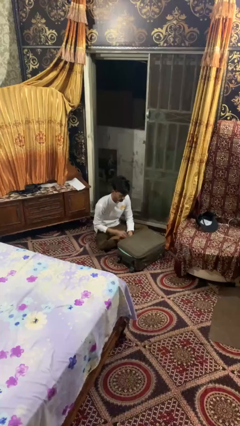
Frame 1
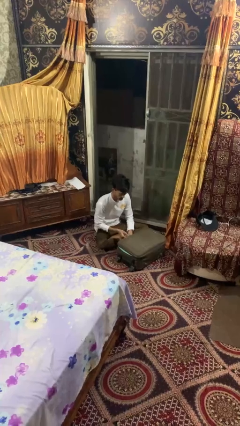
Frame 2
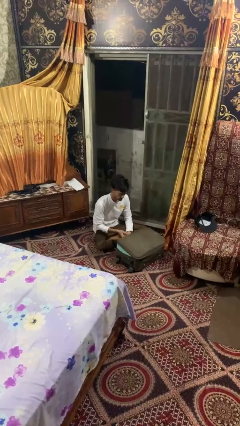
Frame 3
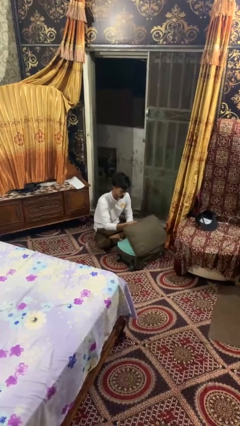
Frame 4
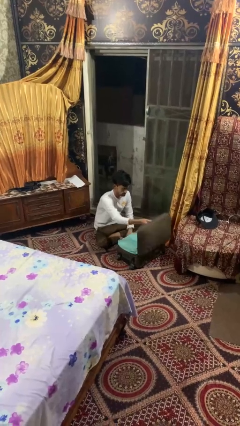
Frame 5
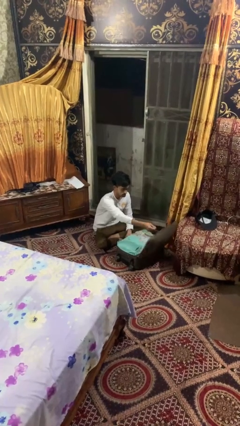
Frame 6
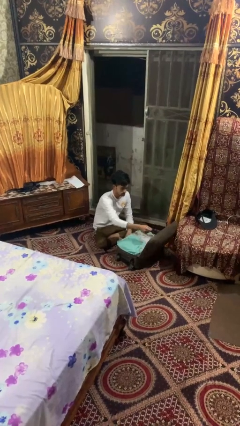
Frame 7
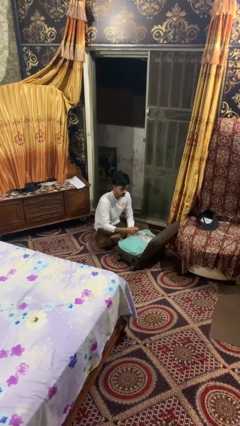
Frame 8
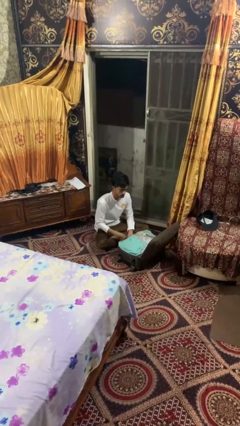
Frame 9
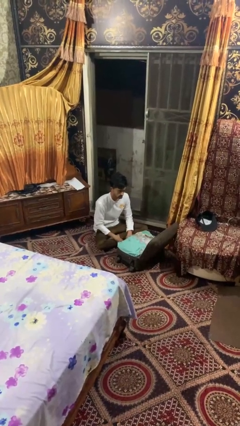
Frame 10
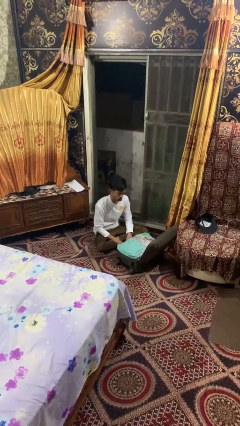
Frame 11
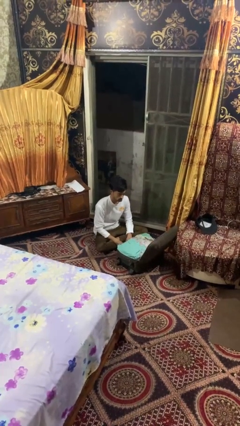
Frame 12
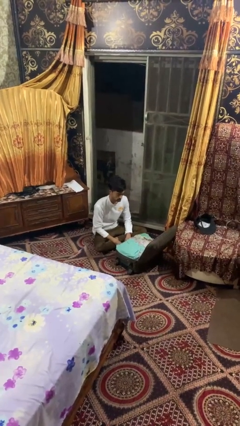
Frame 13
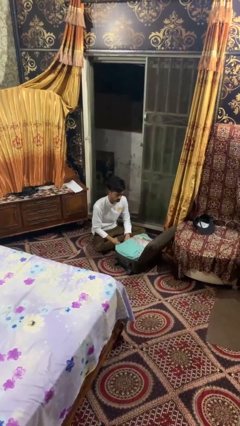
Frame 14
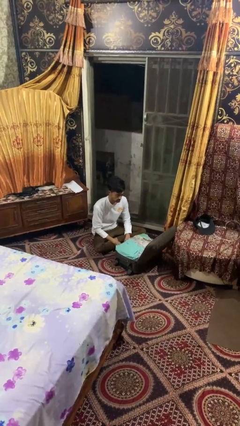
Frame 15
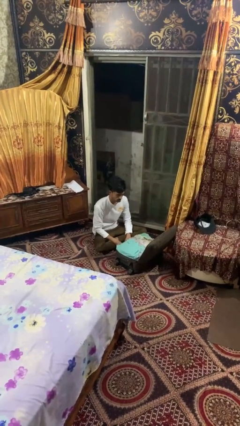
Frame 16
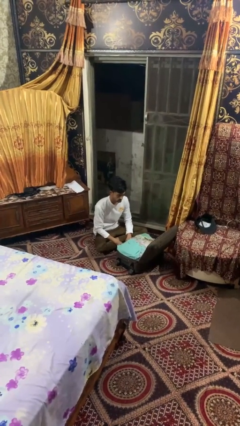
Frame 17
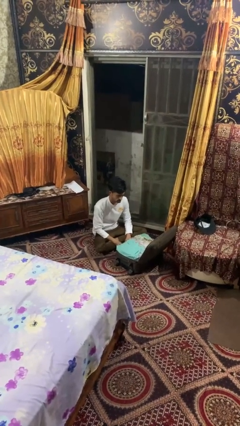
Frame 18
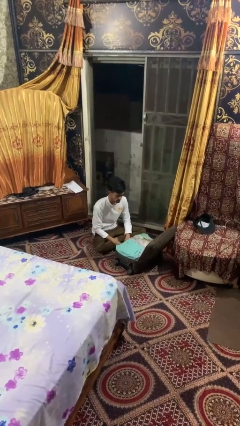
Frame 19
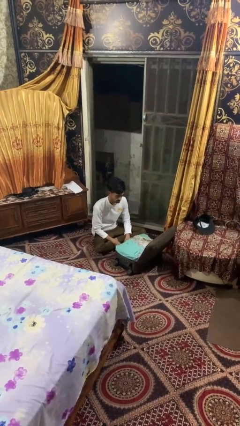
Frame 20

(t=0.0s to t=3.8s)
person opens suitcase

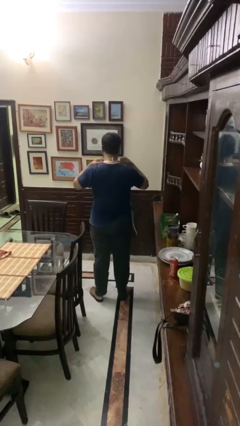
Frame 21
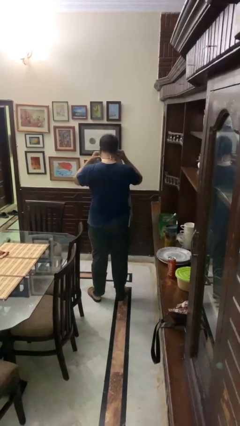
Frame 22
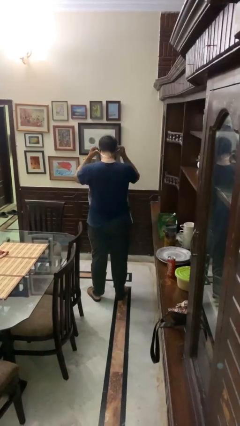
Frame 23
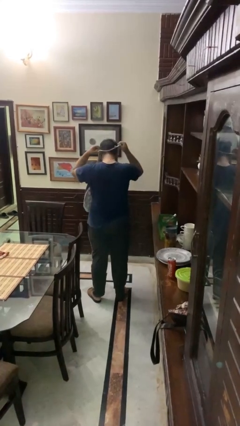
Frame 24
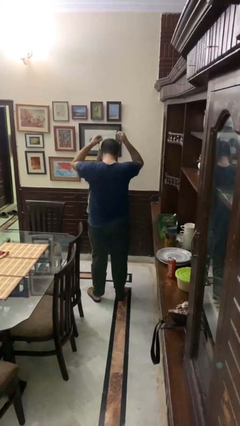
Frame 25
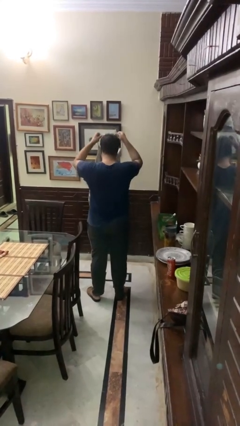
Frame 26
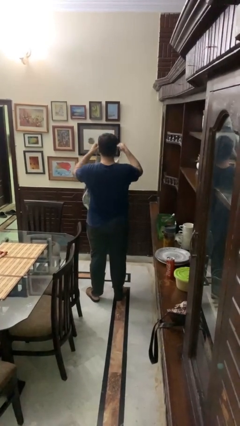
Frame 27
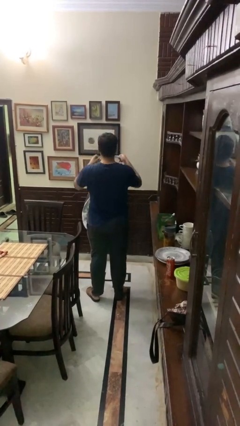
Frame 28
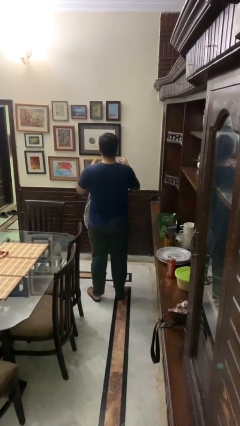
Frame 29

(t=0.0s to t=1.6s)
person takes off apron

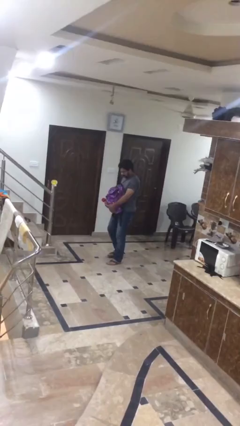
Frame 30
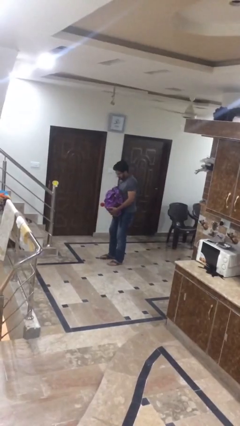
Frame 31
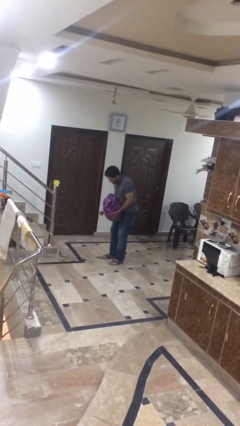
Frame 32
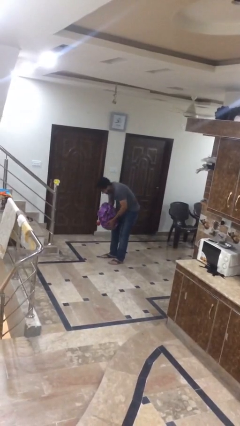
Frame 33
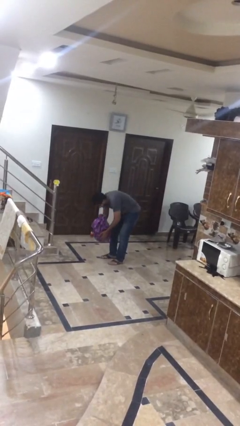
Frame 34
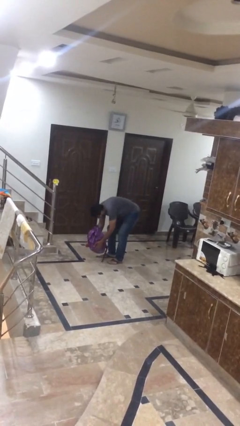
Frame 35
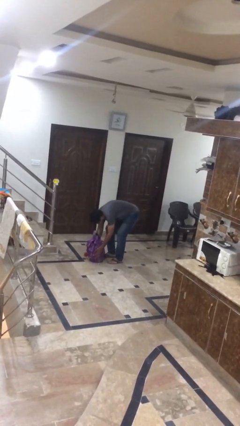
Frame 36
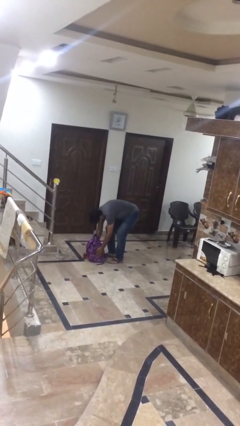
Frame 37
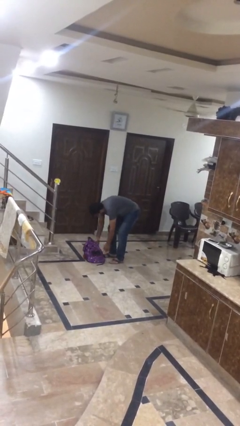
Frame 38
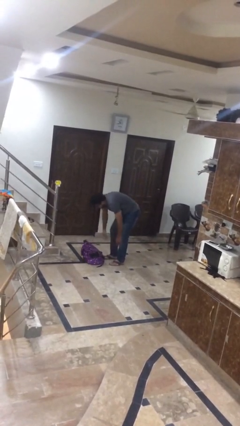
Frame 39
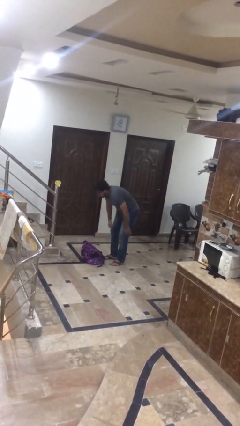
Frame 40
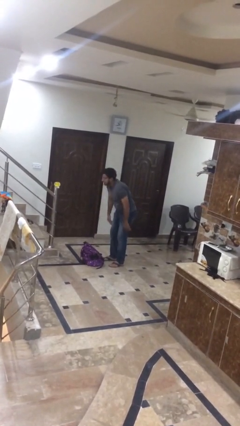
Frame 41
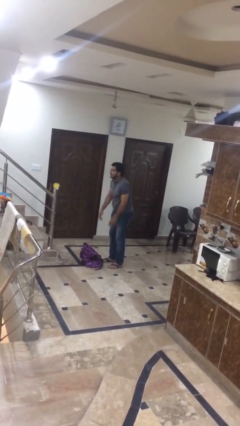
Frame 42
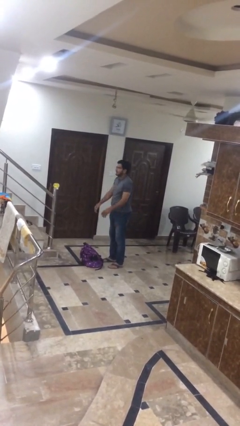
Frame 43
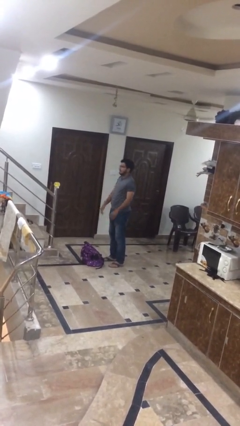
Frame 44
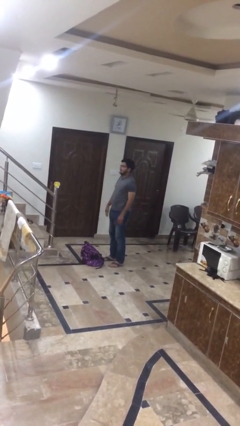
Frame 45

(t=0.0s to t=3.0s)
person puts down object on floor

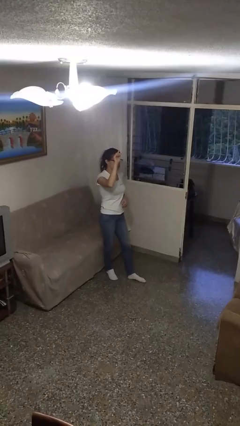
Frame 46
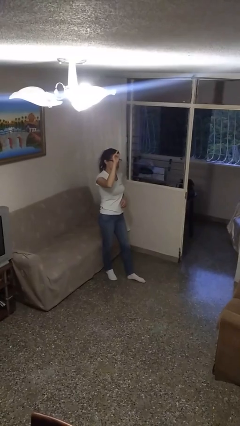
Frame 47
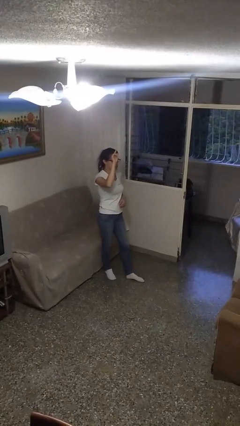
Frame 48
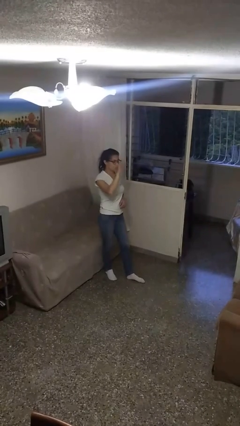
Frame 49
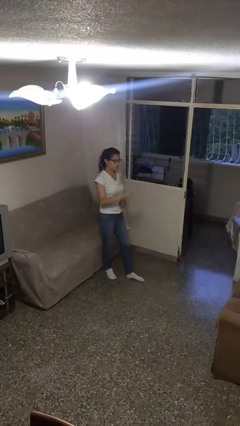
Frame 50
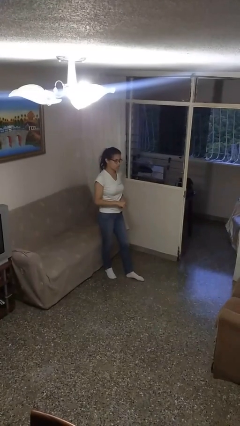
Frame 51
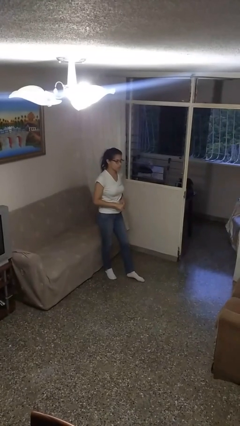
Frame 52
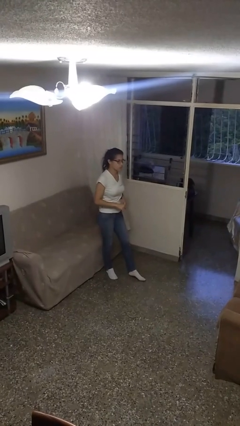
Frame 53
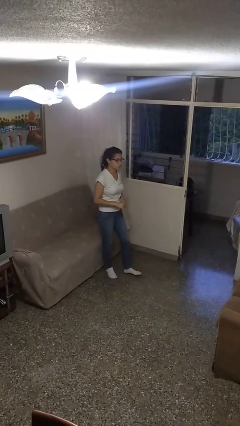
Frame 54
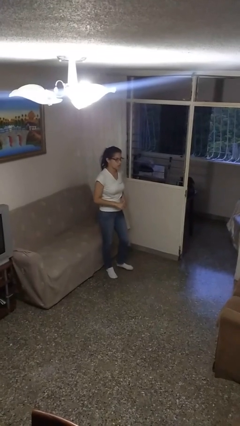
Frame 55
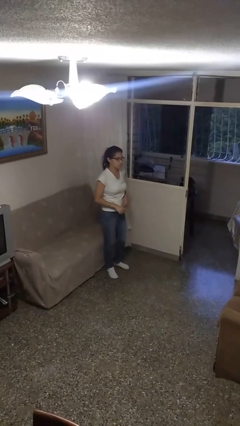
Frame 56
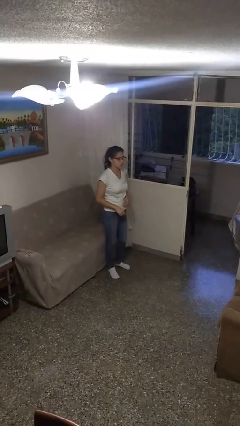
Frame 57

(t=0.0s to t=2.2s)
person gestures swipe down

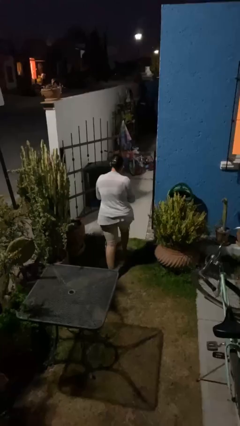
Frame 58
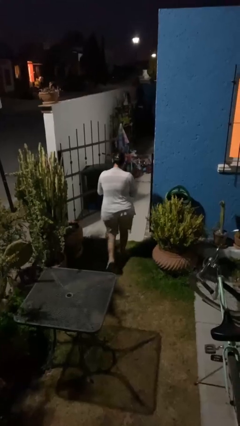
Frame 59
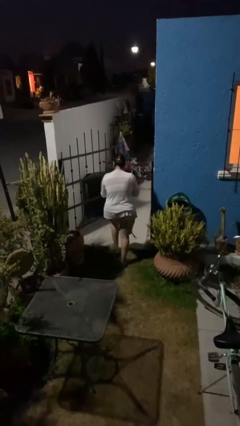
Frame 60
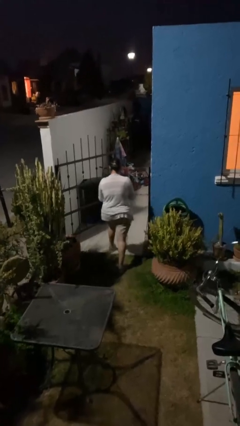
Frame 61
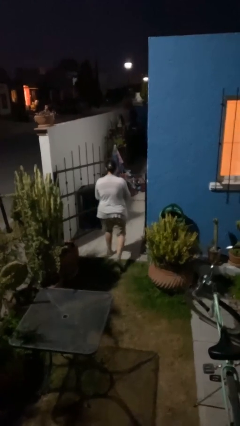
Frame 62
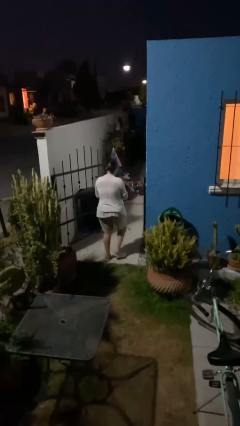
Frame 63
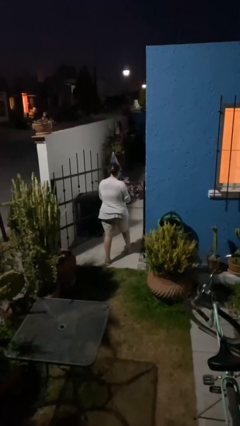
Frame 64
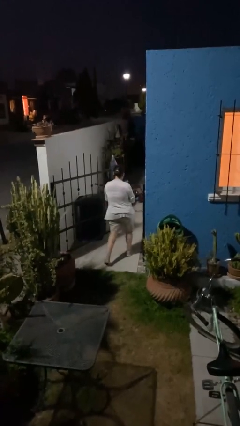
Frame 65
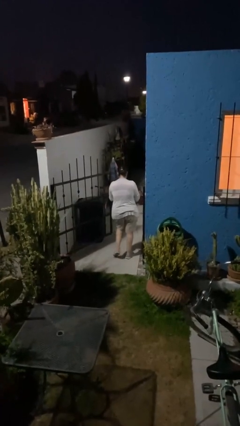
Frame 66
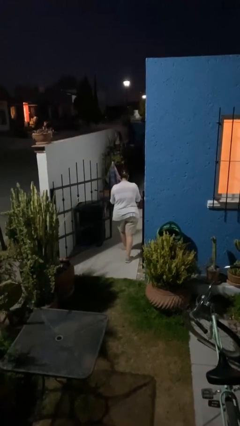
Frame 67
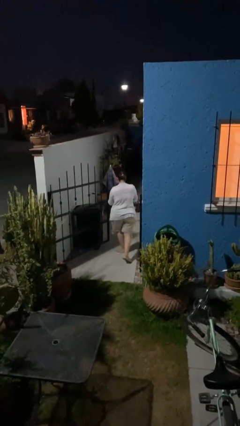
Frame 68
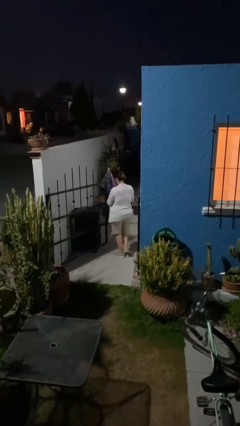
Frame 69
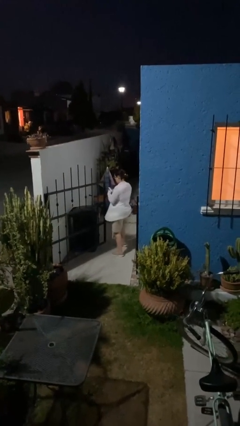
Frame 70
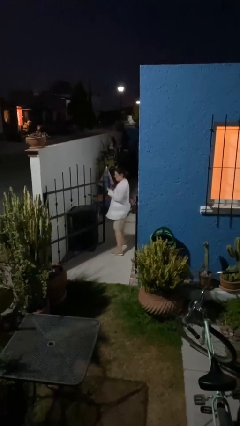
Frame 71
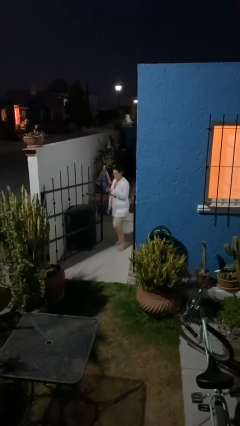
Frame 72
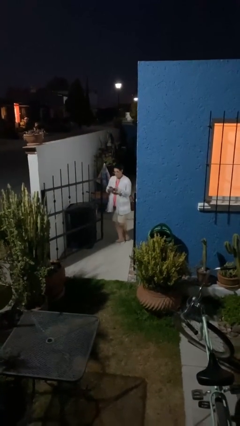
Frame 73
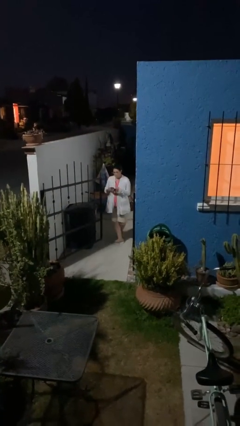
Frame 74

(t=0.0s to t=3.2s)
person exits scene through structure

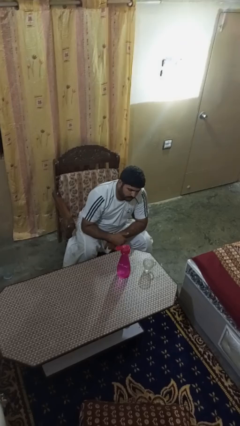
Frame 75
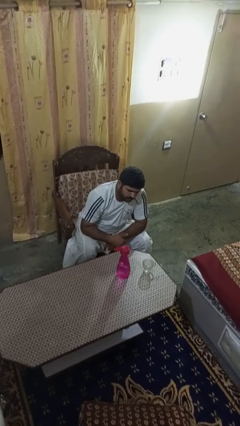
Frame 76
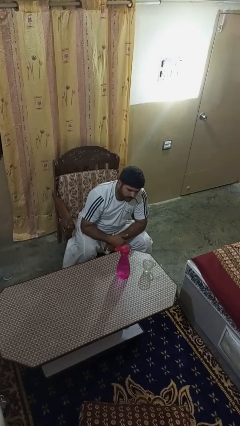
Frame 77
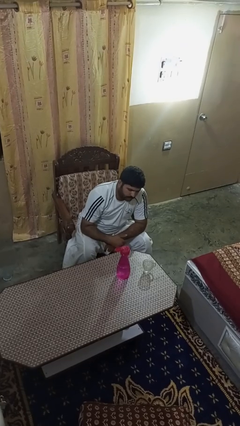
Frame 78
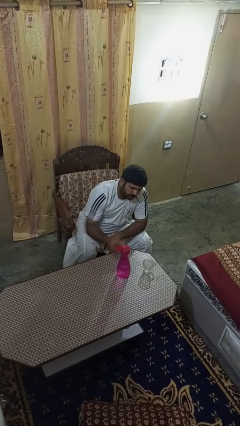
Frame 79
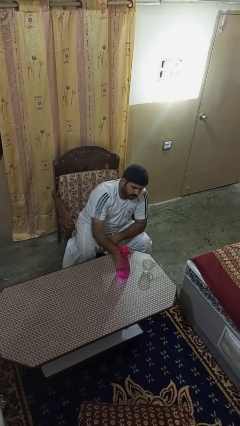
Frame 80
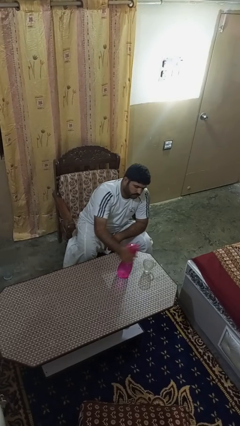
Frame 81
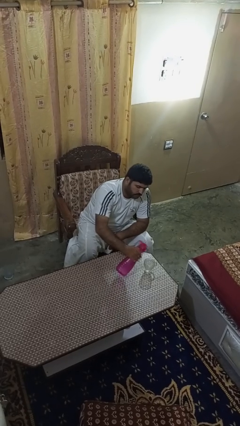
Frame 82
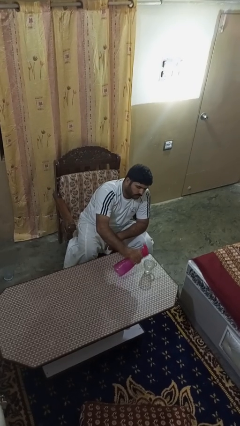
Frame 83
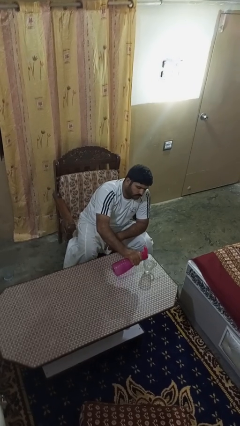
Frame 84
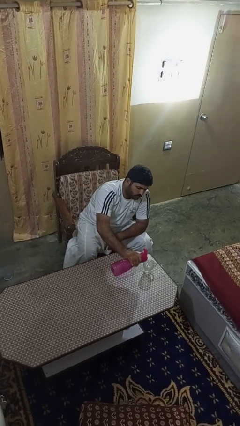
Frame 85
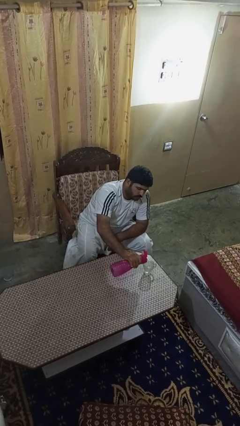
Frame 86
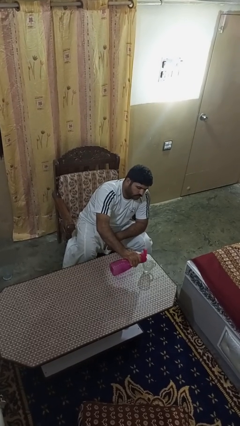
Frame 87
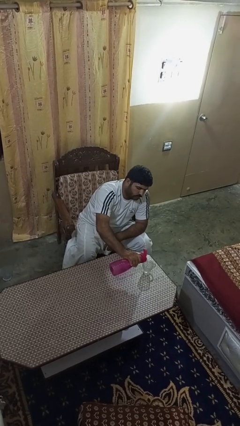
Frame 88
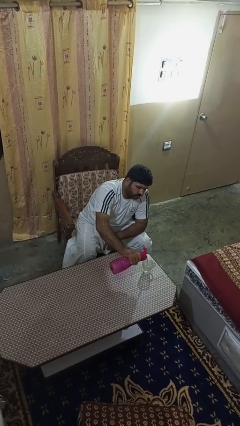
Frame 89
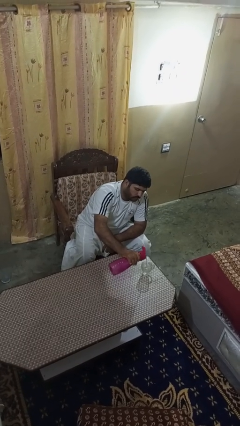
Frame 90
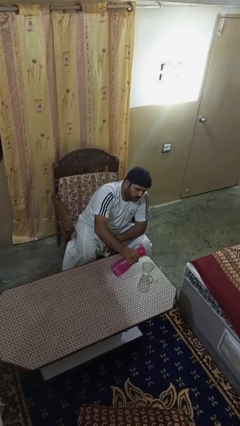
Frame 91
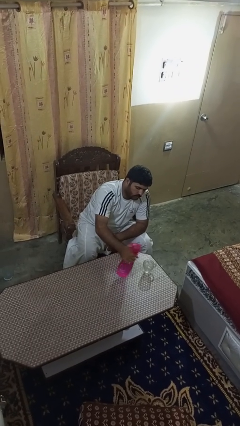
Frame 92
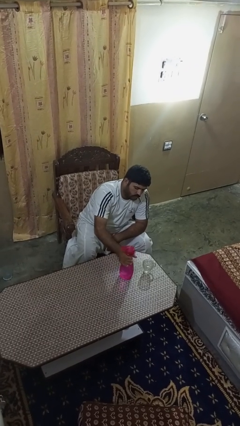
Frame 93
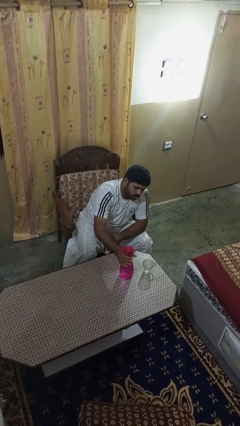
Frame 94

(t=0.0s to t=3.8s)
person pours liquid into cup
